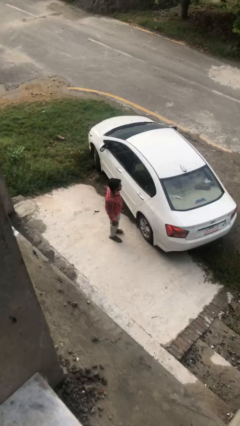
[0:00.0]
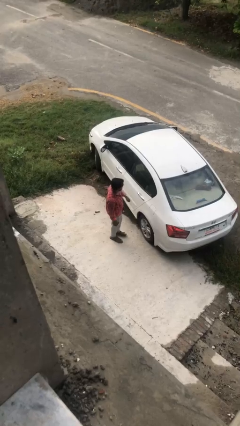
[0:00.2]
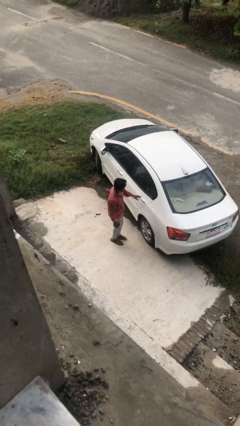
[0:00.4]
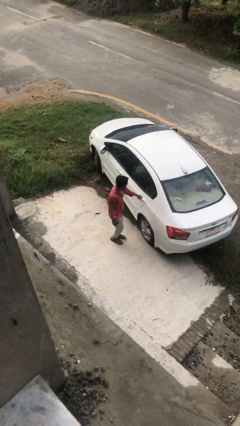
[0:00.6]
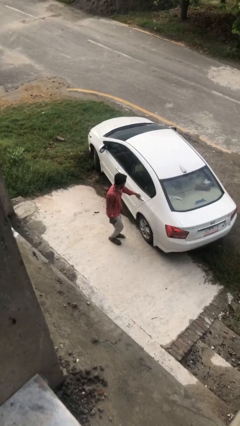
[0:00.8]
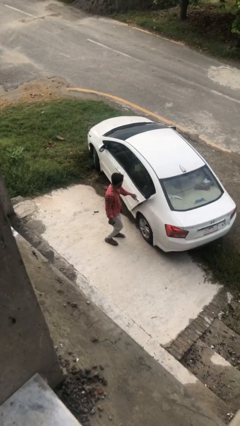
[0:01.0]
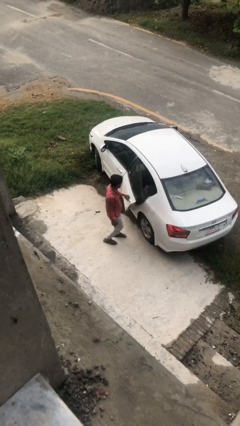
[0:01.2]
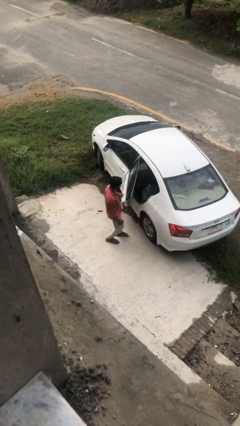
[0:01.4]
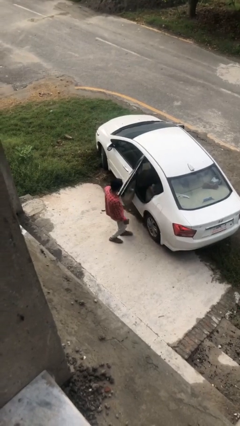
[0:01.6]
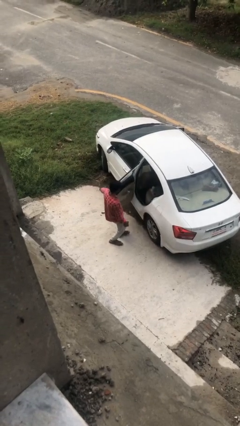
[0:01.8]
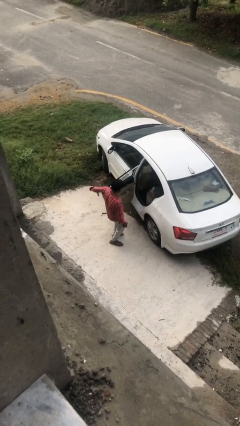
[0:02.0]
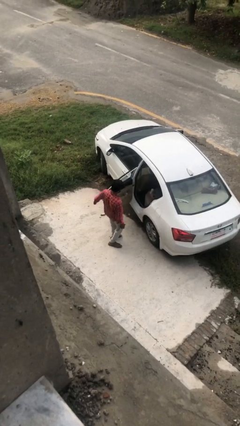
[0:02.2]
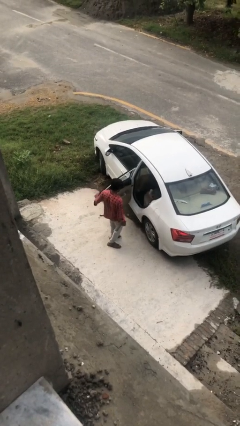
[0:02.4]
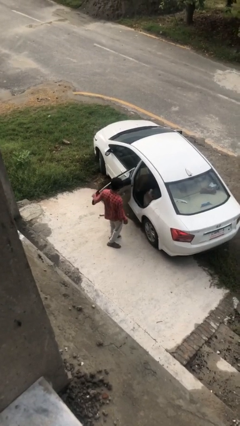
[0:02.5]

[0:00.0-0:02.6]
person opens car door

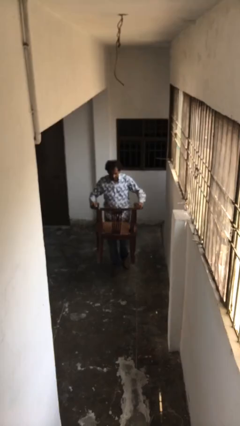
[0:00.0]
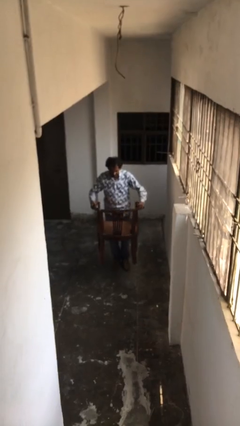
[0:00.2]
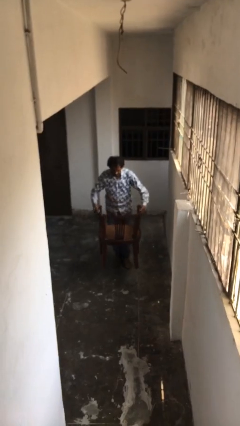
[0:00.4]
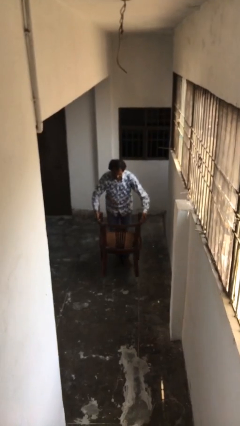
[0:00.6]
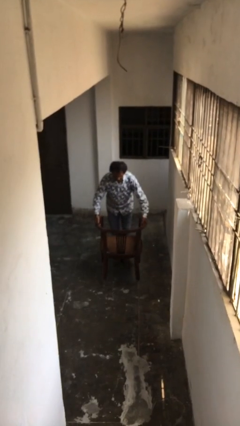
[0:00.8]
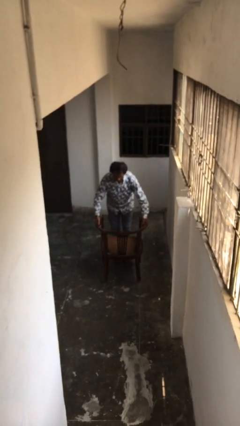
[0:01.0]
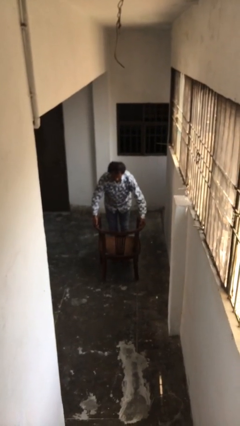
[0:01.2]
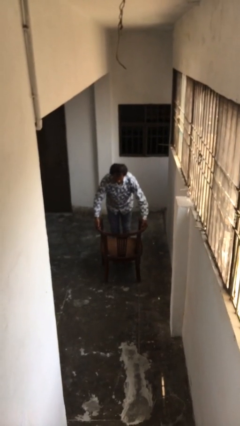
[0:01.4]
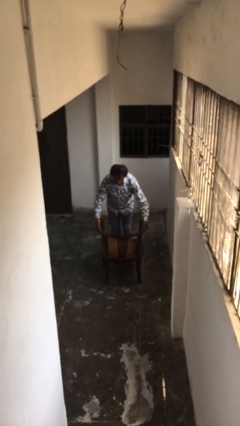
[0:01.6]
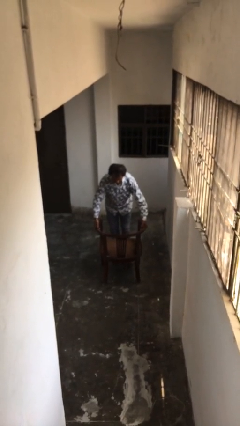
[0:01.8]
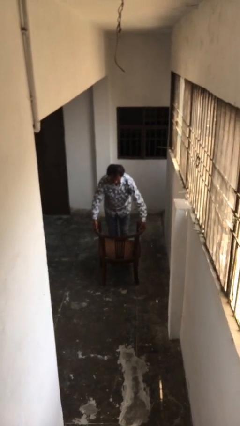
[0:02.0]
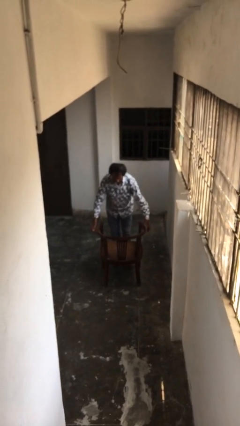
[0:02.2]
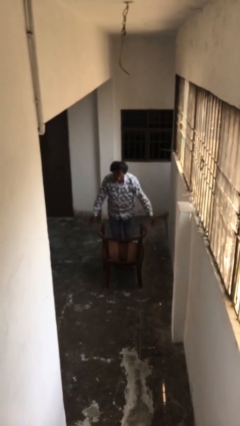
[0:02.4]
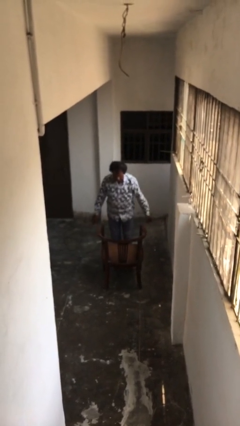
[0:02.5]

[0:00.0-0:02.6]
person puts down object on floor

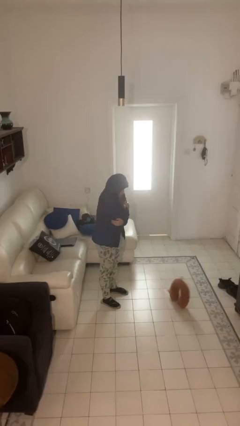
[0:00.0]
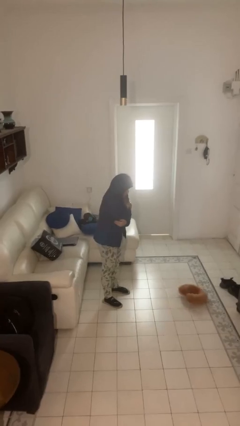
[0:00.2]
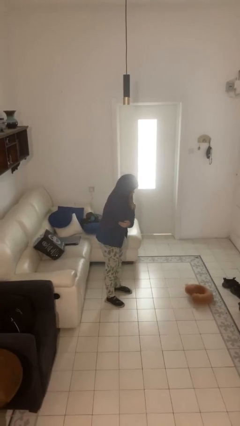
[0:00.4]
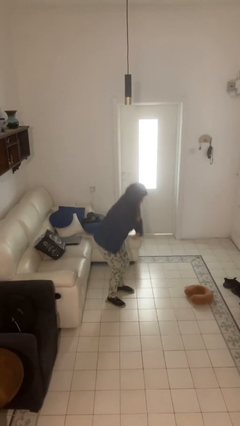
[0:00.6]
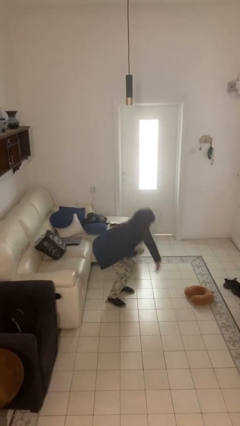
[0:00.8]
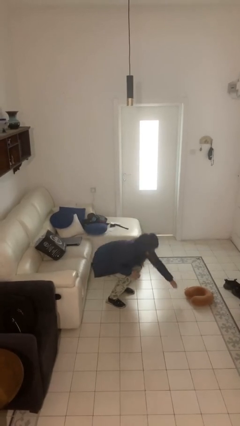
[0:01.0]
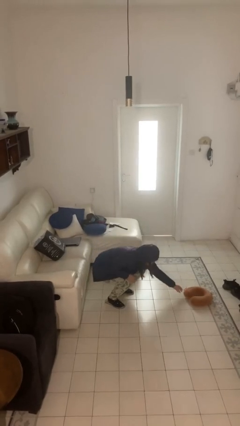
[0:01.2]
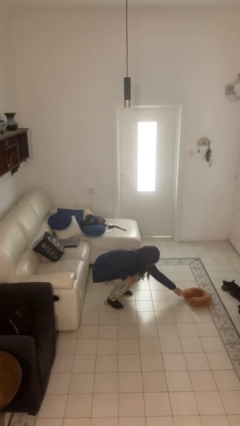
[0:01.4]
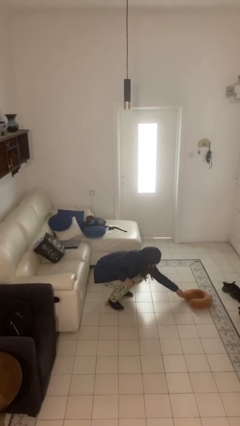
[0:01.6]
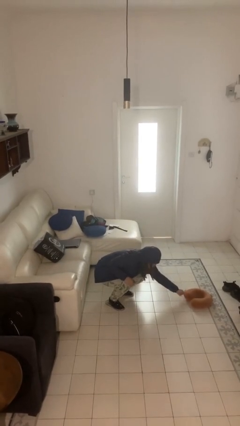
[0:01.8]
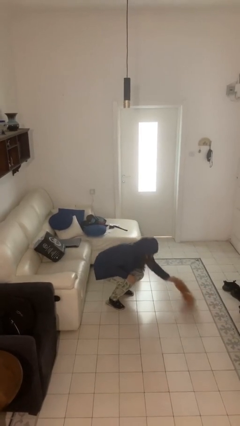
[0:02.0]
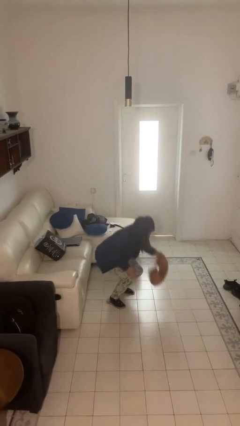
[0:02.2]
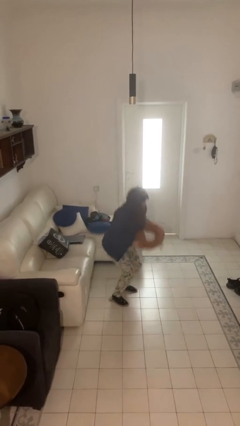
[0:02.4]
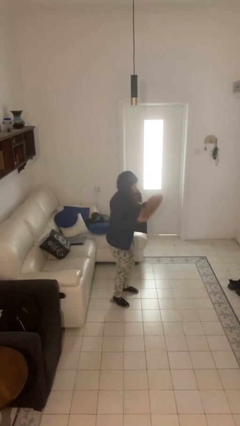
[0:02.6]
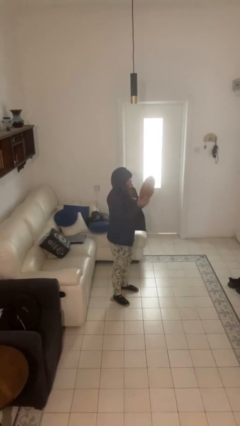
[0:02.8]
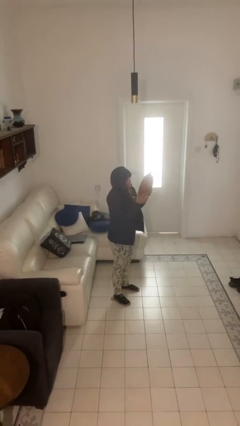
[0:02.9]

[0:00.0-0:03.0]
person picks up object from floor

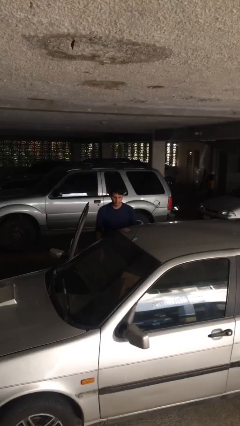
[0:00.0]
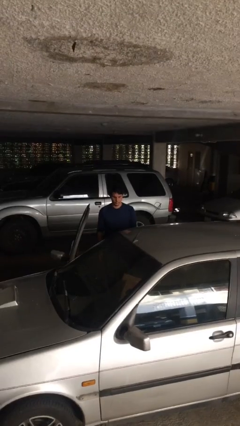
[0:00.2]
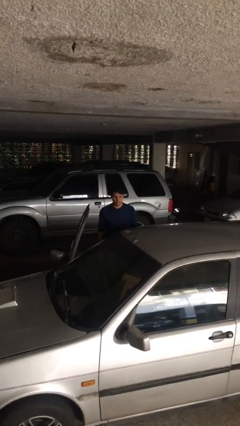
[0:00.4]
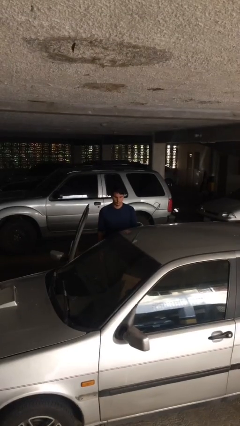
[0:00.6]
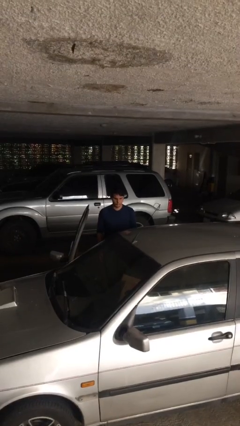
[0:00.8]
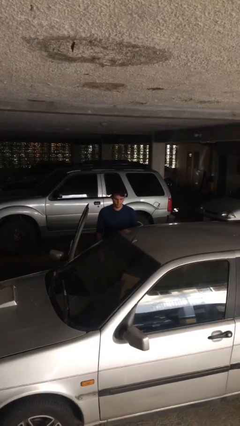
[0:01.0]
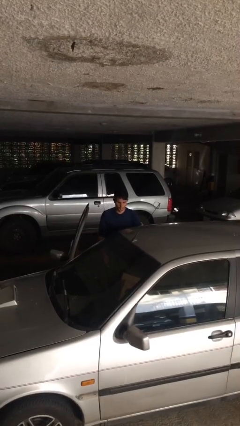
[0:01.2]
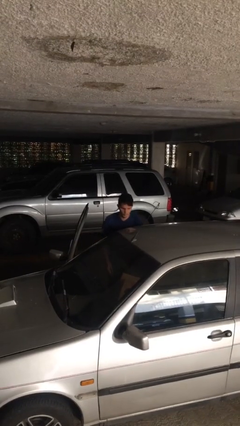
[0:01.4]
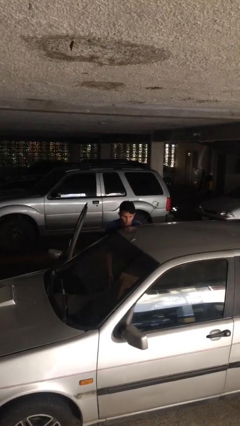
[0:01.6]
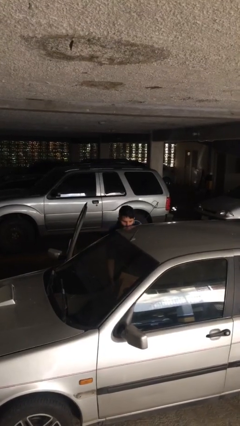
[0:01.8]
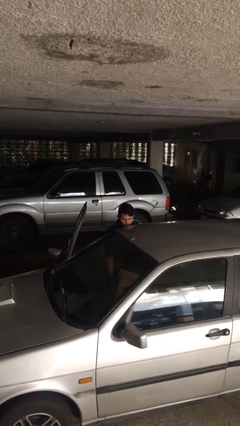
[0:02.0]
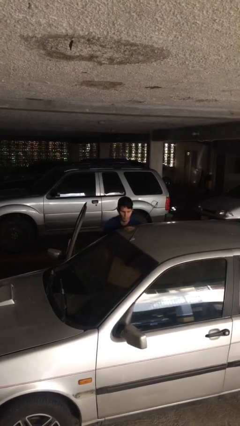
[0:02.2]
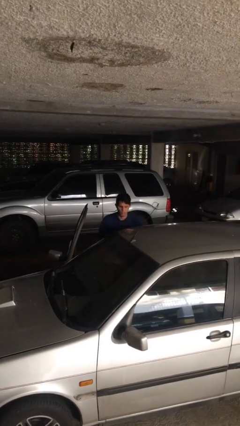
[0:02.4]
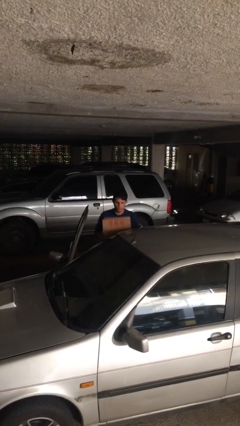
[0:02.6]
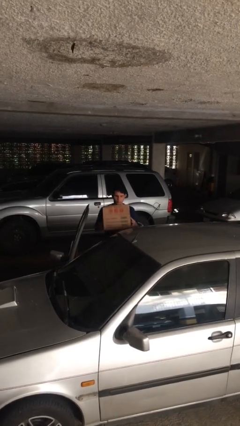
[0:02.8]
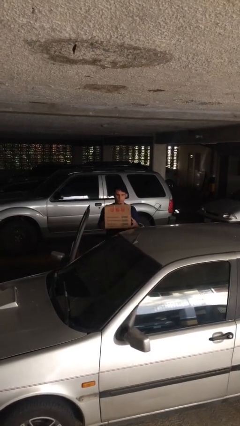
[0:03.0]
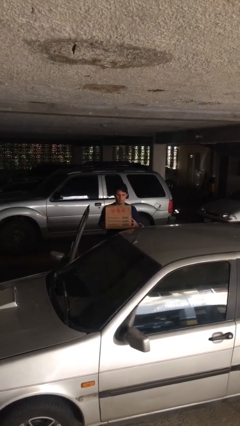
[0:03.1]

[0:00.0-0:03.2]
person unloads car

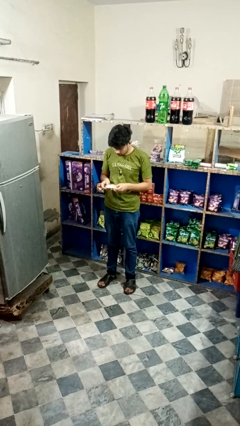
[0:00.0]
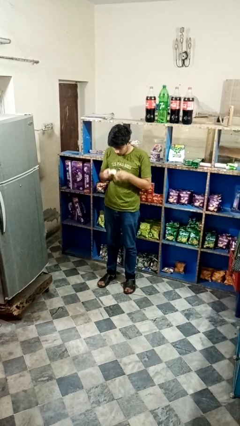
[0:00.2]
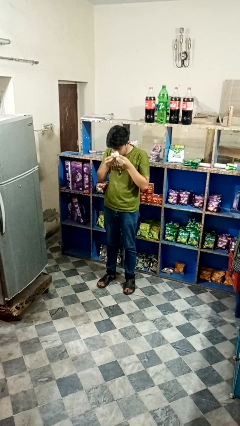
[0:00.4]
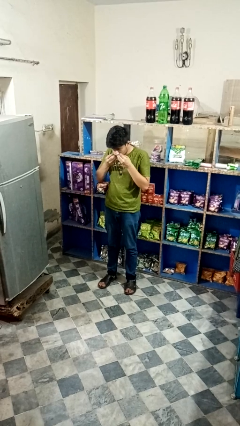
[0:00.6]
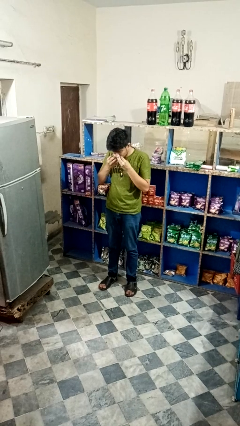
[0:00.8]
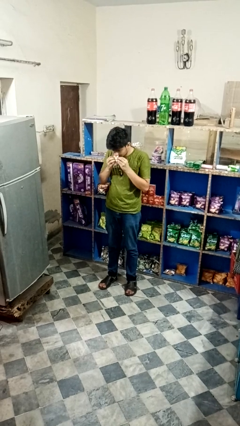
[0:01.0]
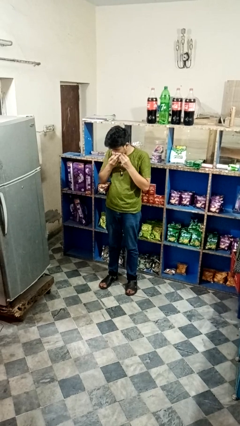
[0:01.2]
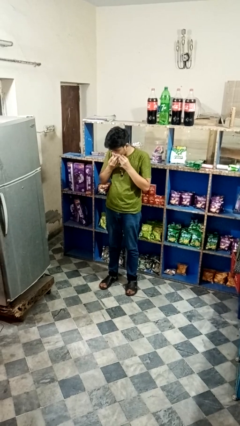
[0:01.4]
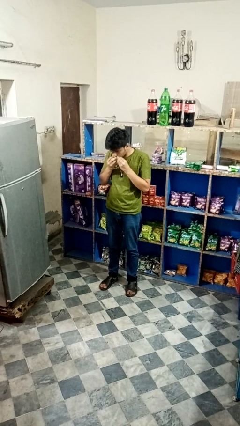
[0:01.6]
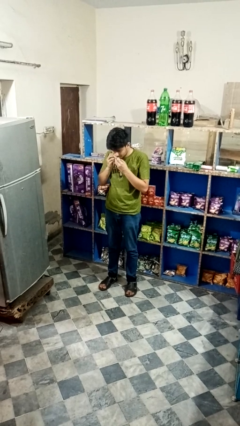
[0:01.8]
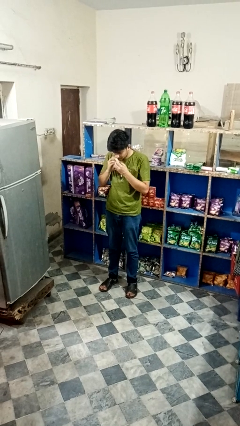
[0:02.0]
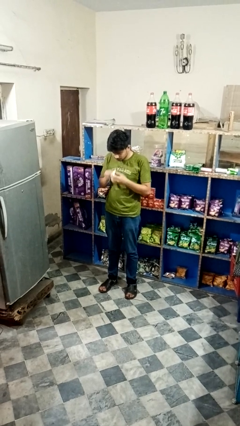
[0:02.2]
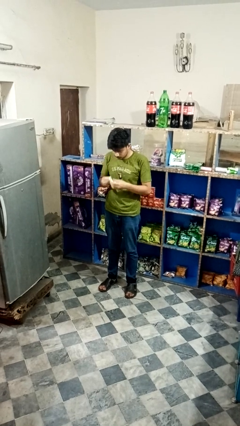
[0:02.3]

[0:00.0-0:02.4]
person wipes mouth with napkin

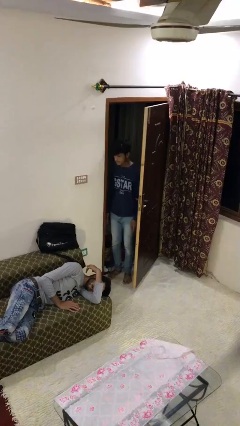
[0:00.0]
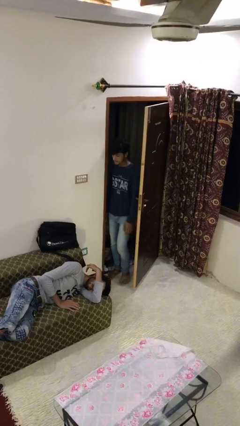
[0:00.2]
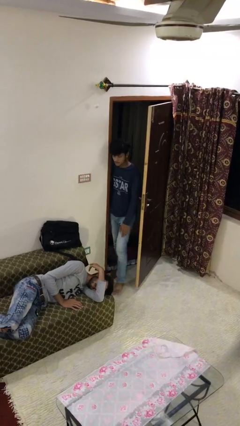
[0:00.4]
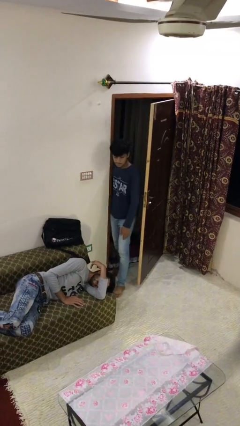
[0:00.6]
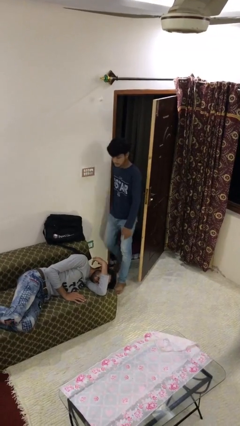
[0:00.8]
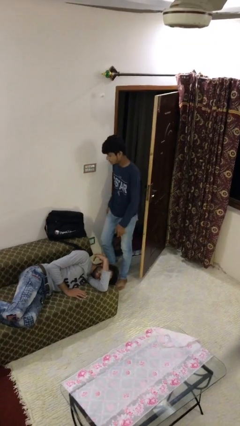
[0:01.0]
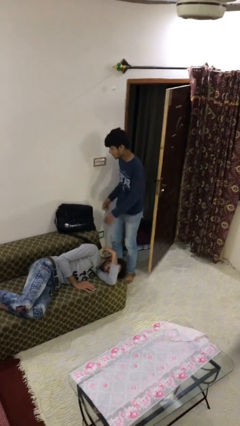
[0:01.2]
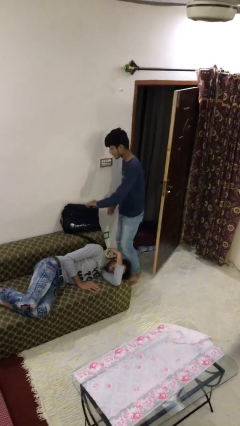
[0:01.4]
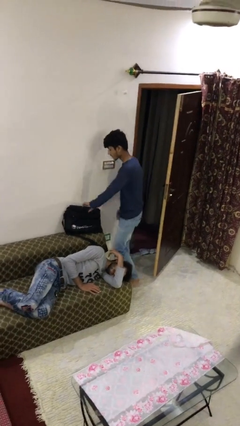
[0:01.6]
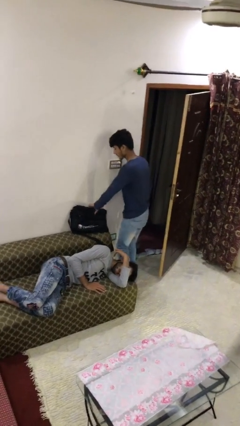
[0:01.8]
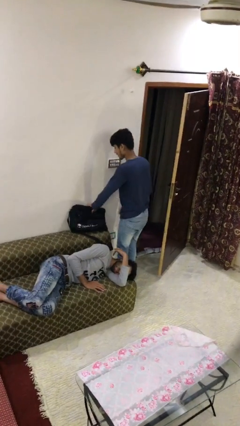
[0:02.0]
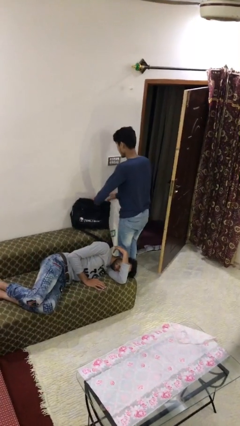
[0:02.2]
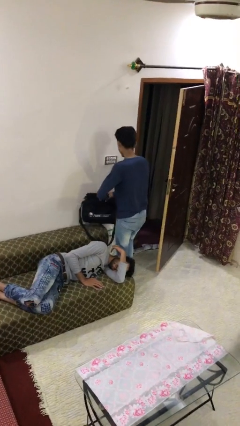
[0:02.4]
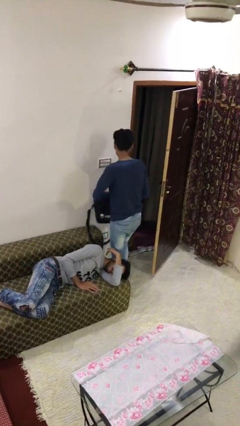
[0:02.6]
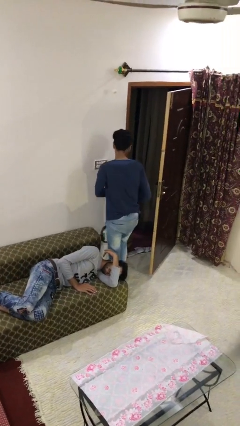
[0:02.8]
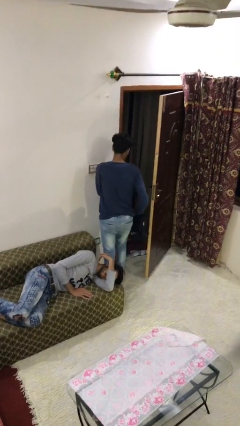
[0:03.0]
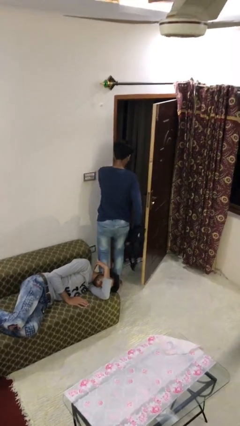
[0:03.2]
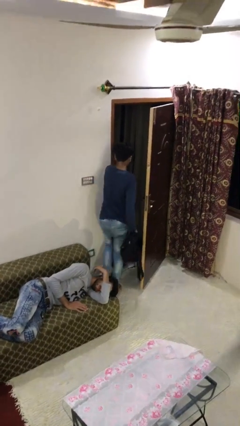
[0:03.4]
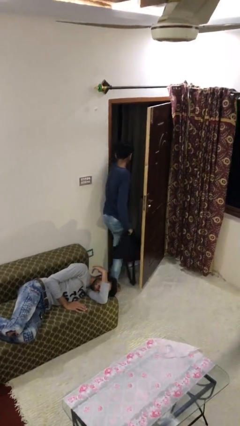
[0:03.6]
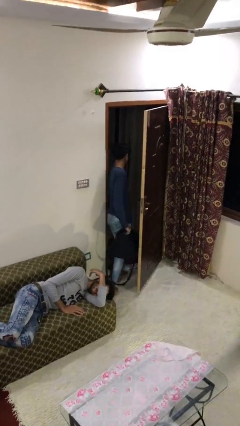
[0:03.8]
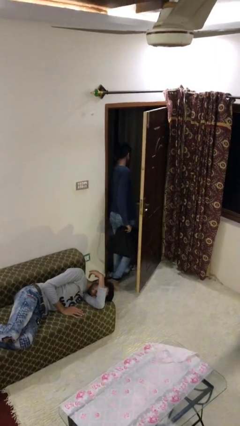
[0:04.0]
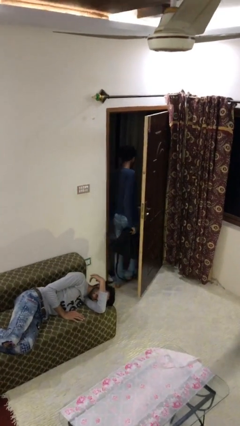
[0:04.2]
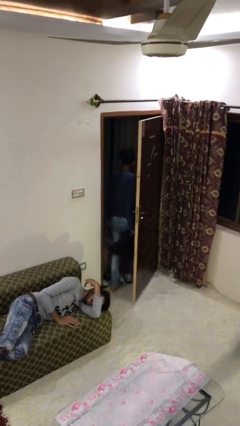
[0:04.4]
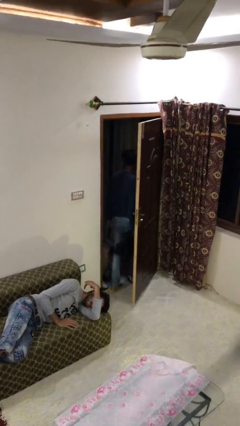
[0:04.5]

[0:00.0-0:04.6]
person steals object from person
